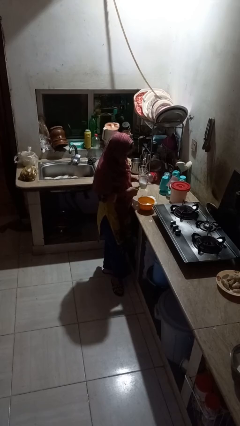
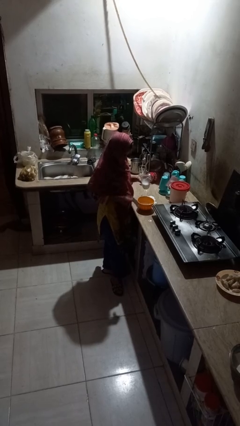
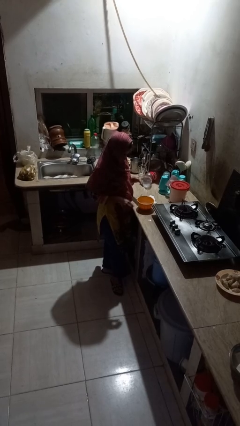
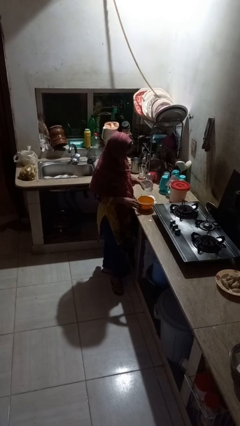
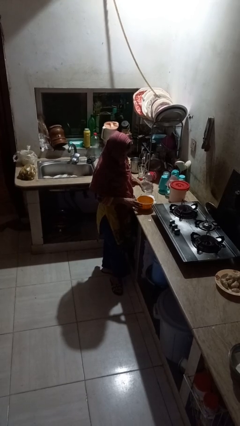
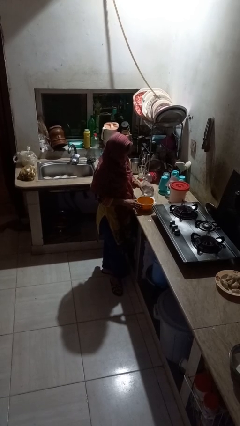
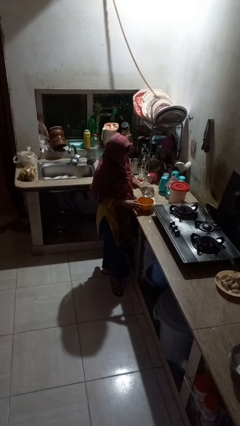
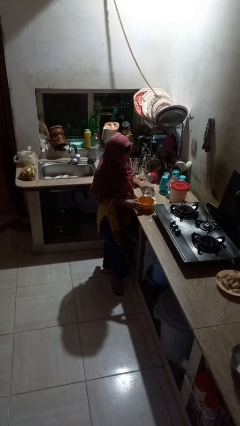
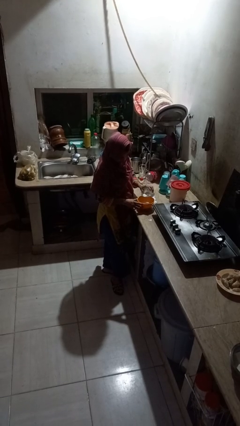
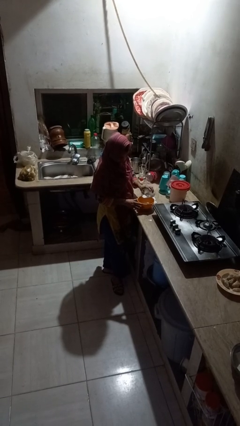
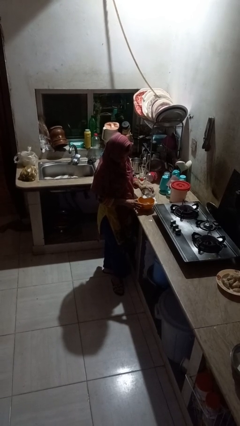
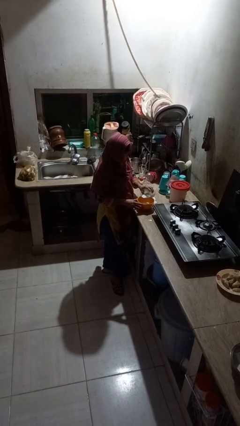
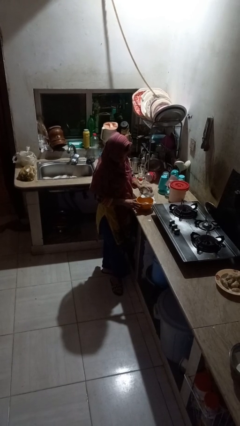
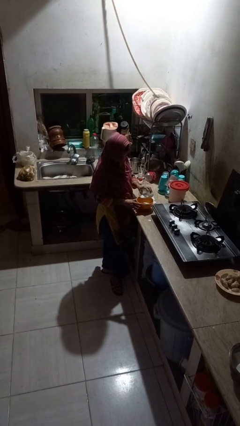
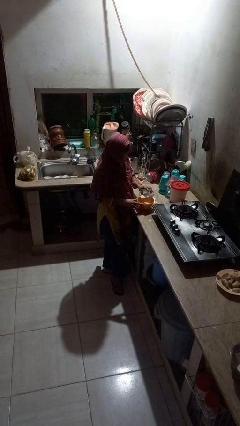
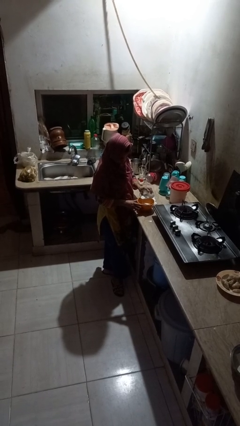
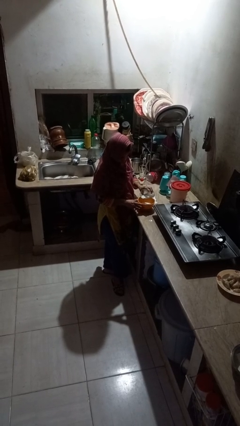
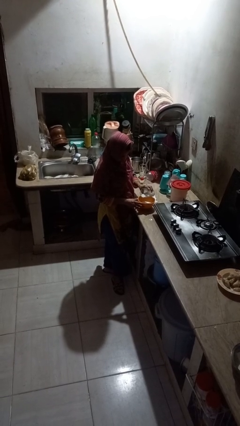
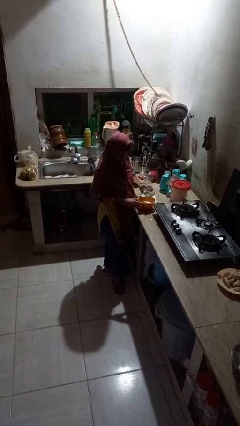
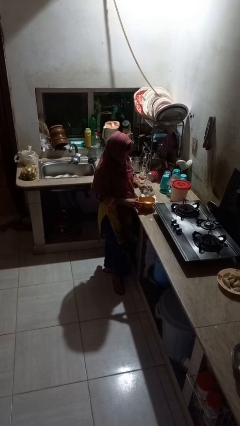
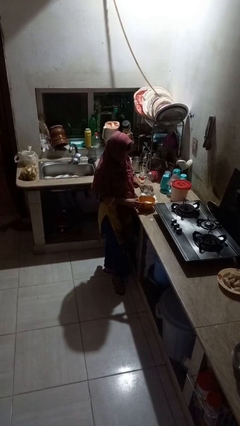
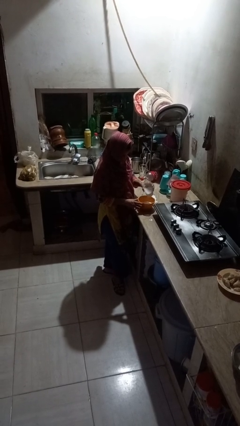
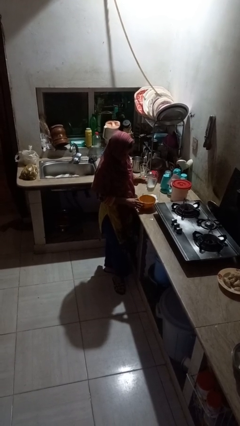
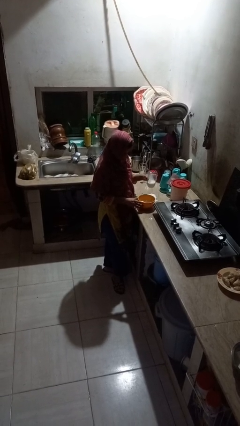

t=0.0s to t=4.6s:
person pours into bowl

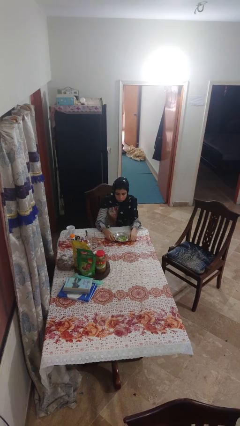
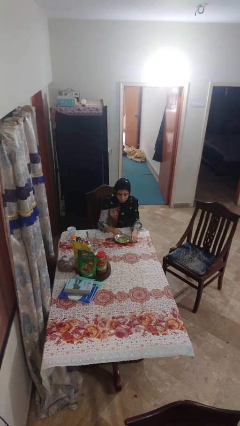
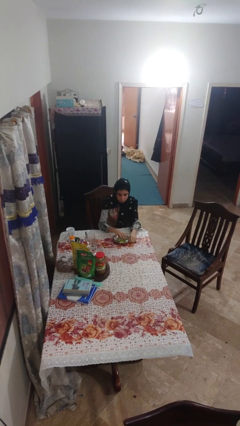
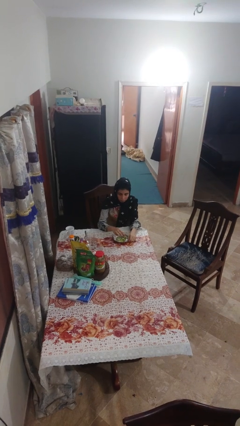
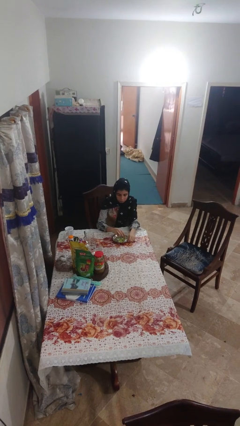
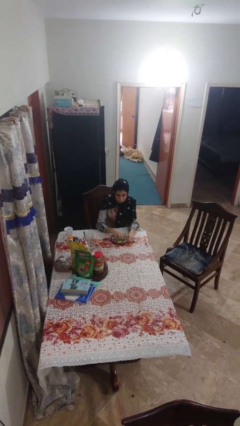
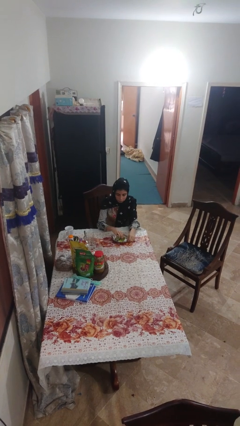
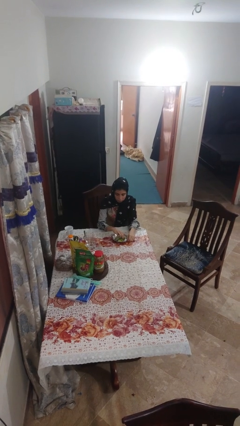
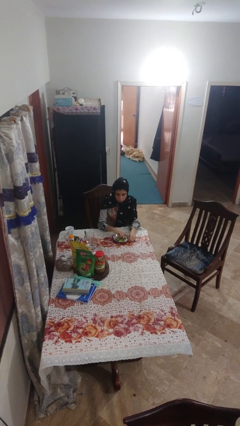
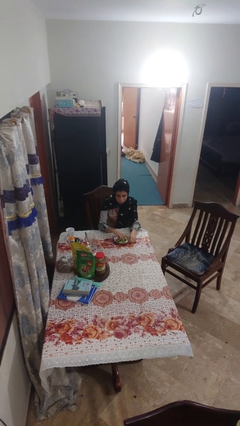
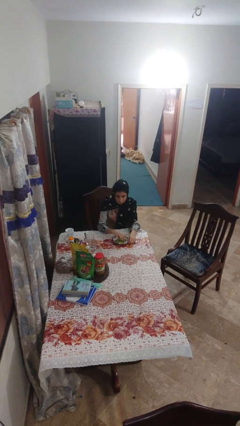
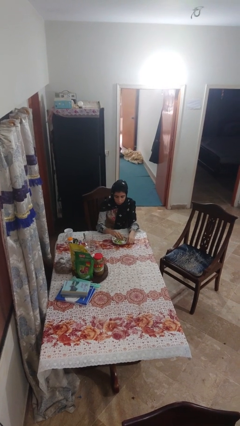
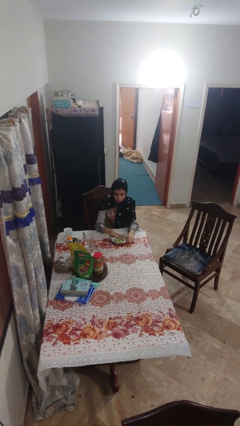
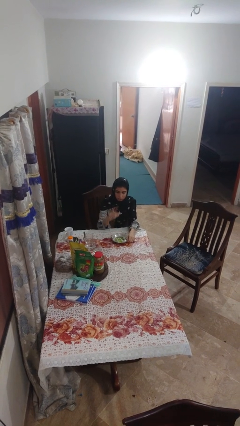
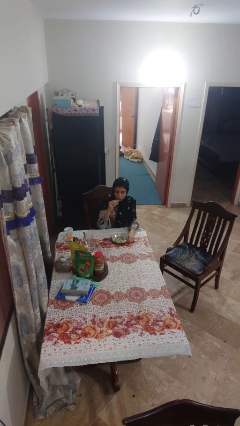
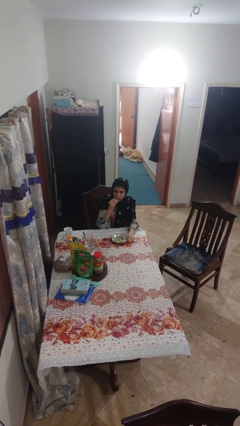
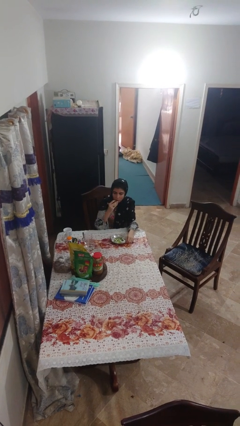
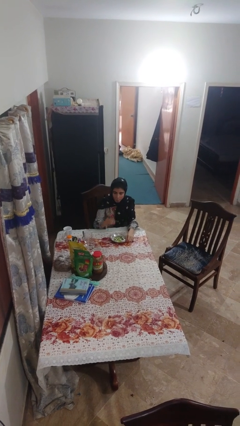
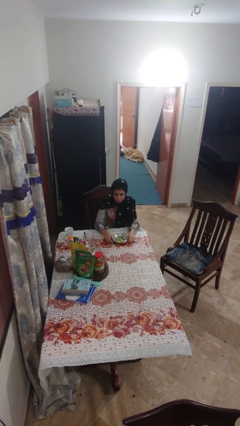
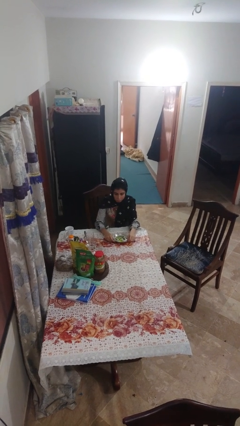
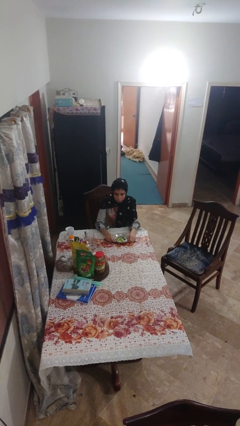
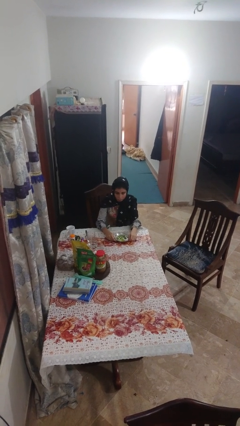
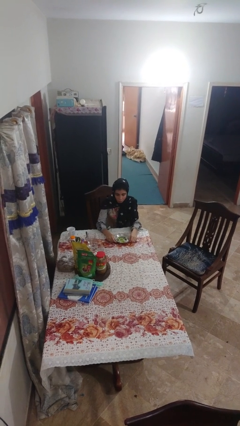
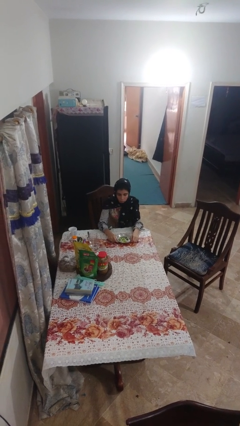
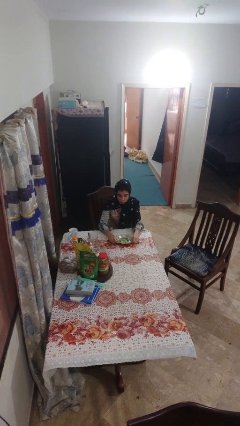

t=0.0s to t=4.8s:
person eats with hands

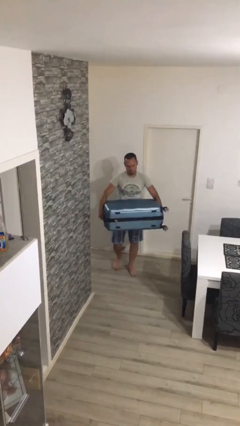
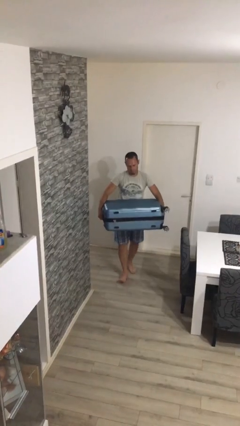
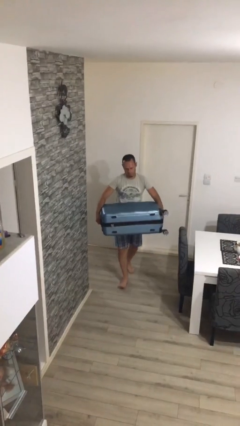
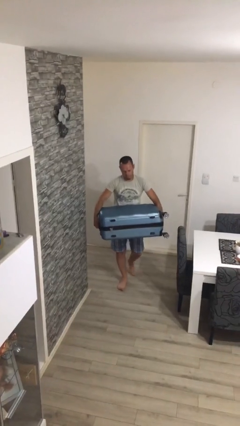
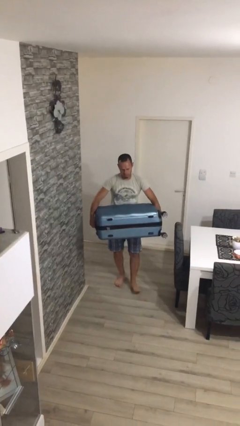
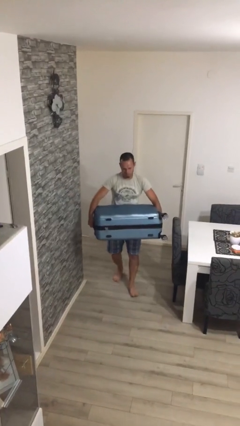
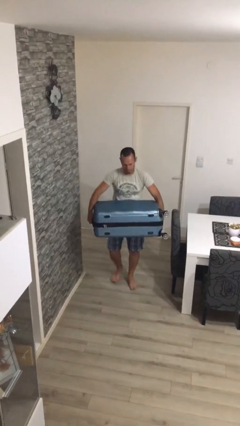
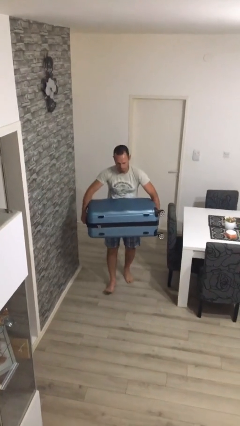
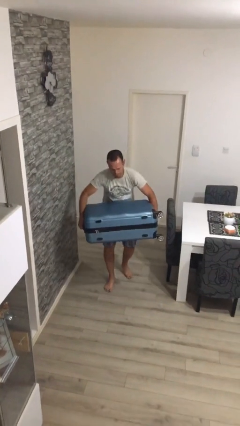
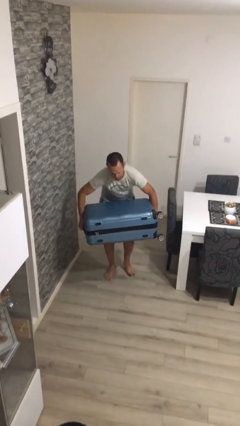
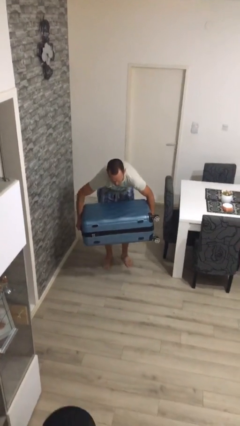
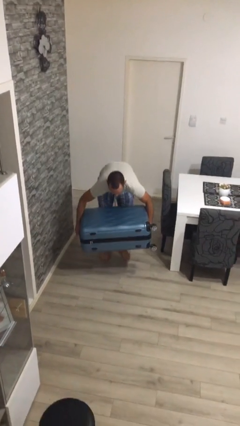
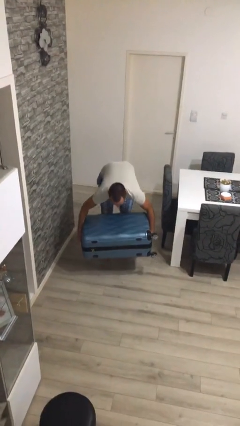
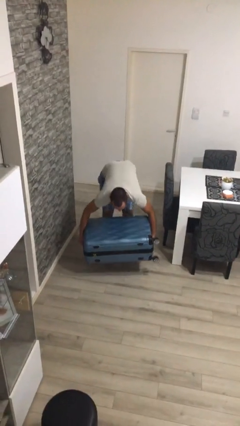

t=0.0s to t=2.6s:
person carries heavy object

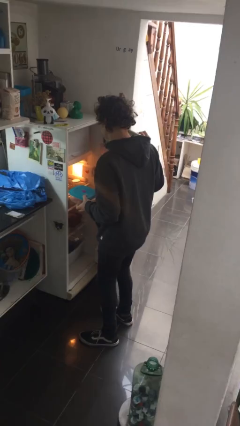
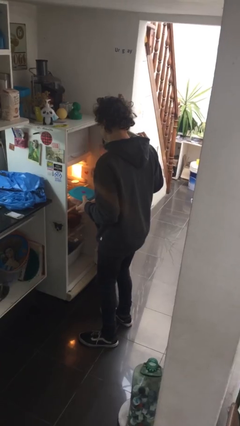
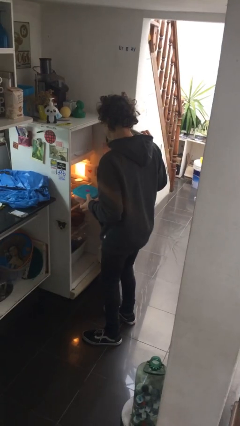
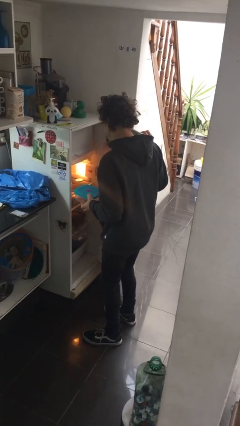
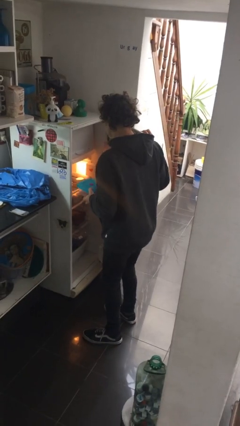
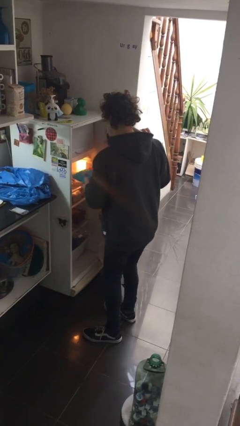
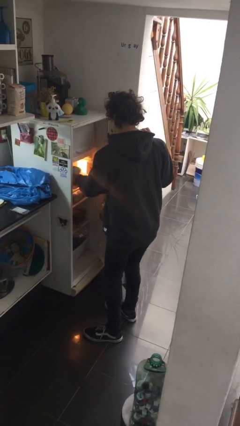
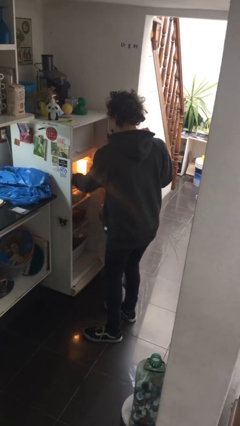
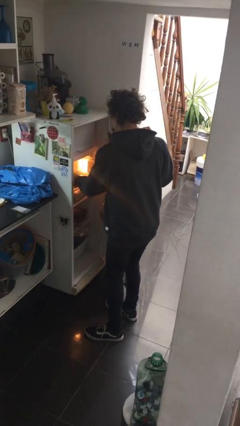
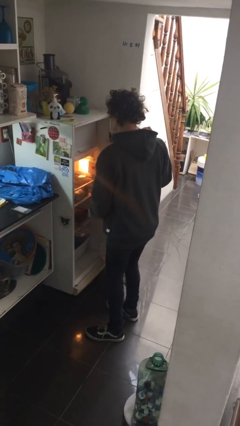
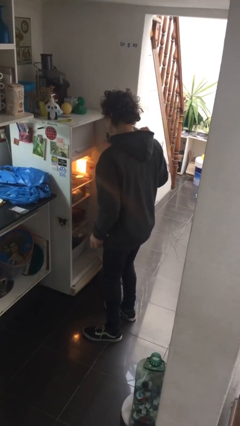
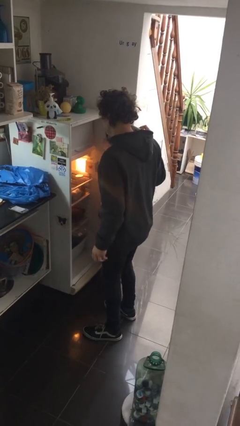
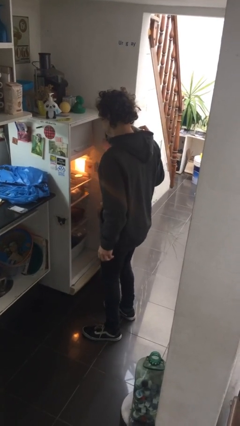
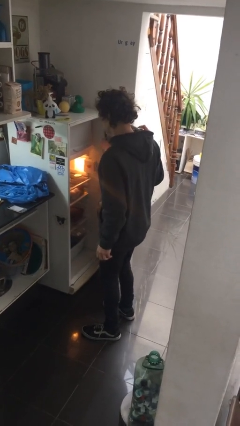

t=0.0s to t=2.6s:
person puts object into refrigerator

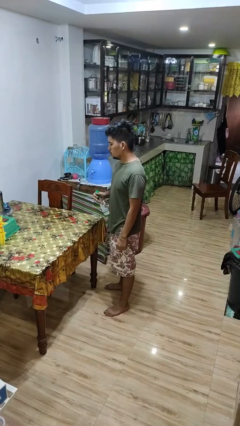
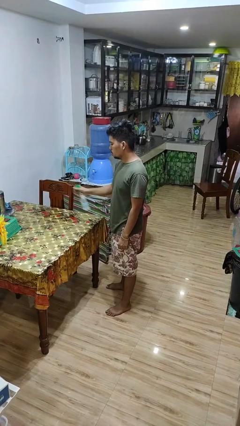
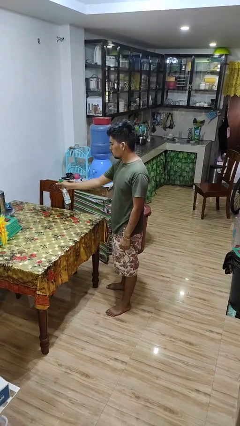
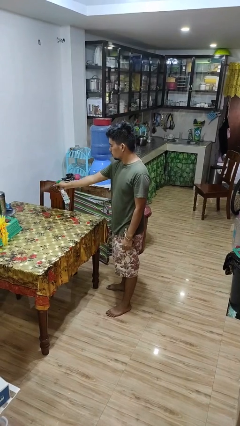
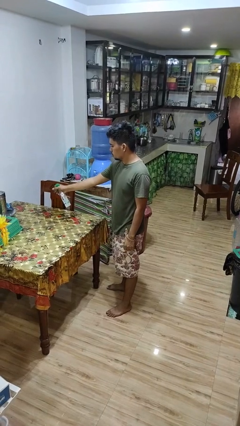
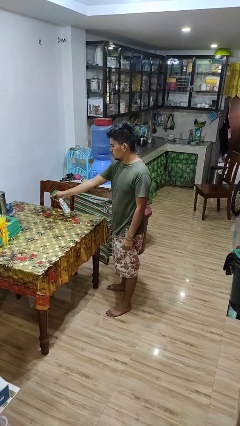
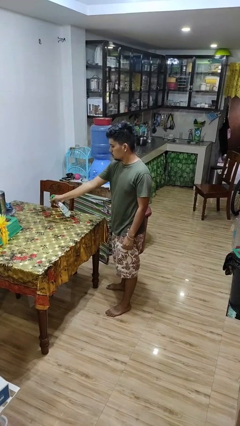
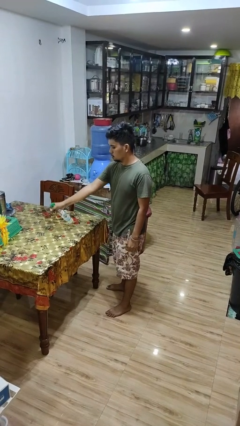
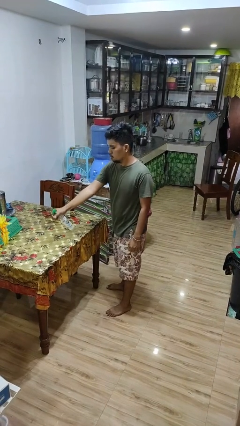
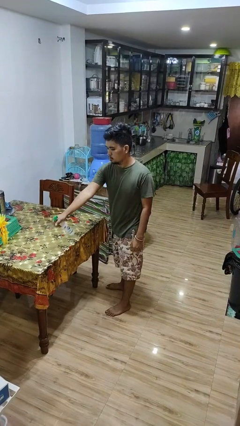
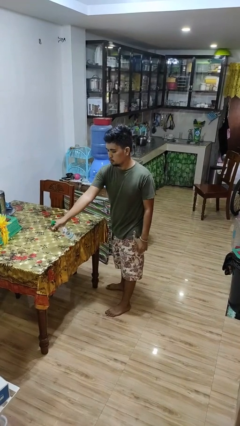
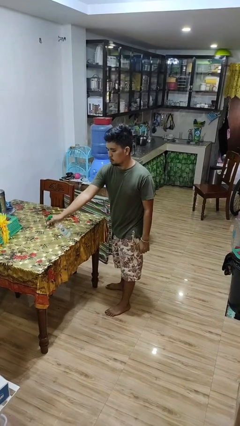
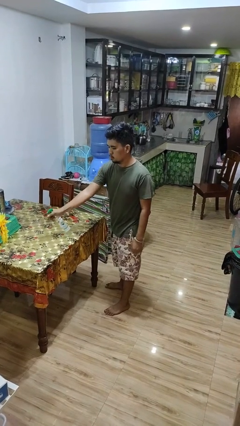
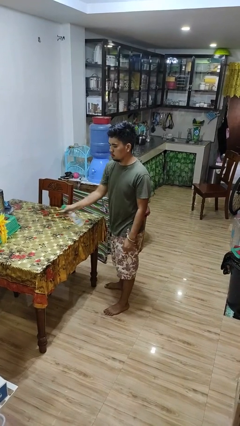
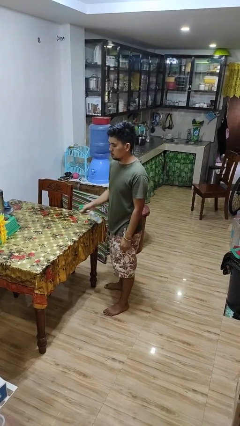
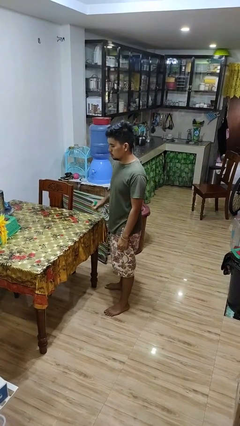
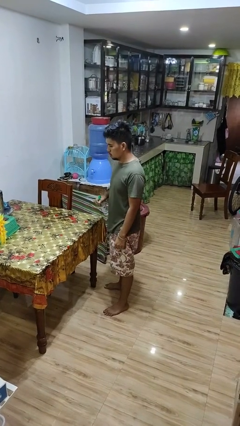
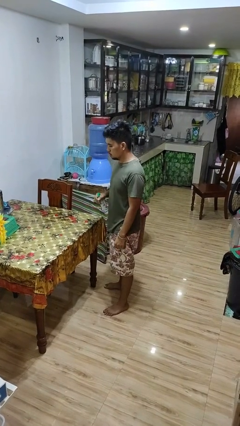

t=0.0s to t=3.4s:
person sprays from bottle
